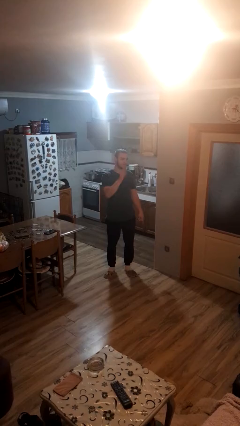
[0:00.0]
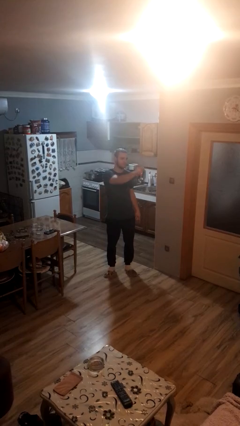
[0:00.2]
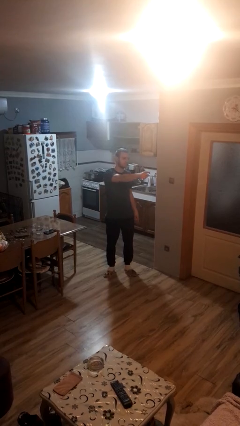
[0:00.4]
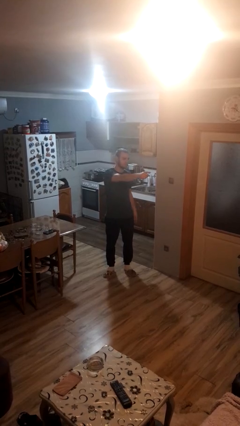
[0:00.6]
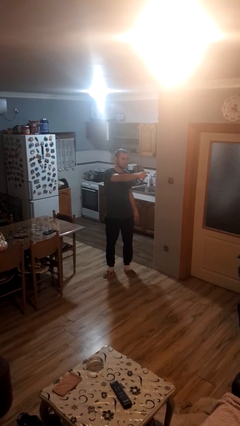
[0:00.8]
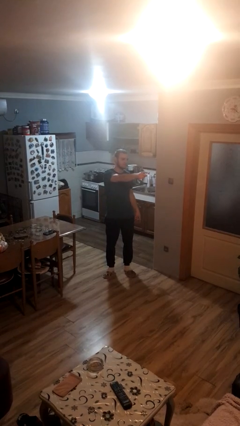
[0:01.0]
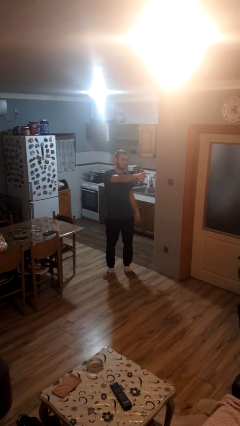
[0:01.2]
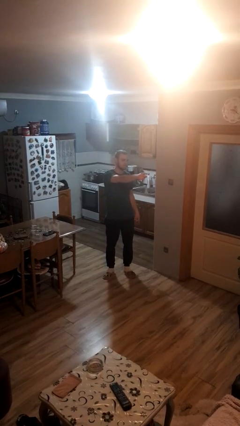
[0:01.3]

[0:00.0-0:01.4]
person points at person

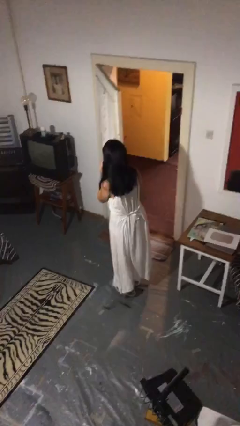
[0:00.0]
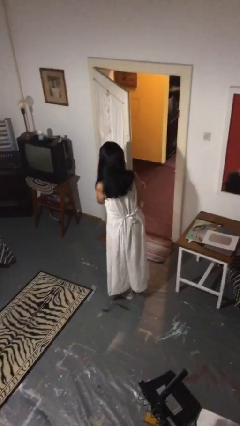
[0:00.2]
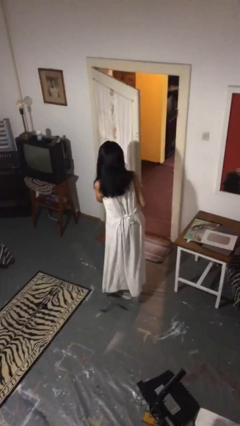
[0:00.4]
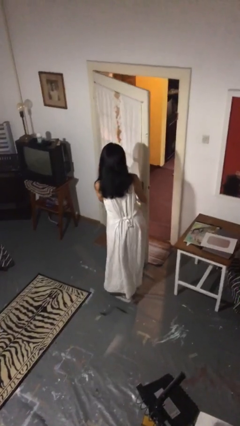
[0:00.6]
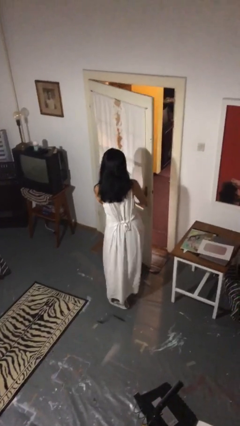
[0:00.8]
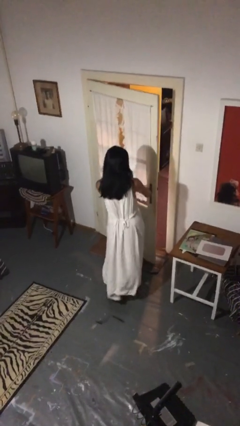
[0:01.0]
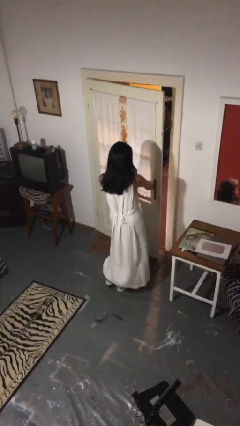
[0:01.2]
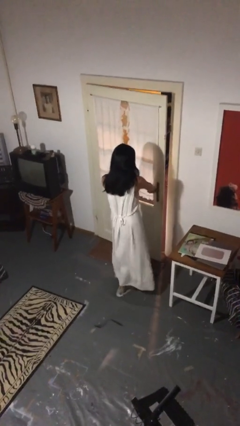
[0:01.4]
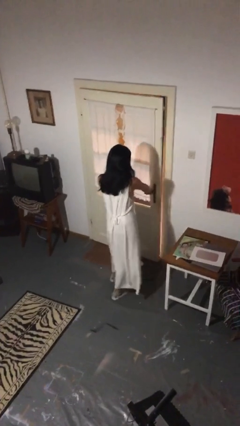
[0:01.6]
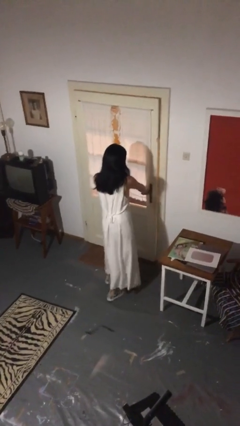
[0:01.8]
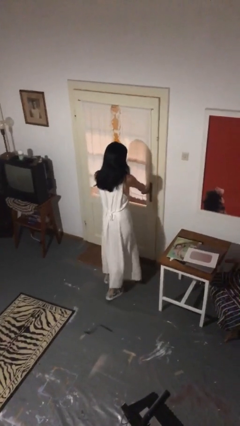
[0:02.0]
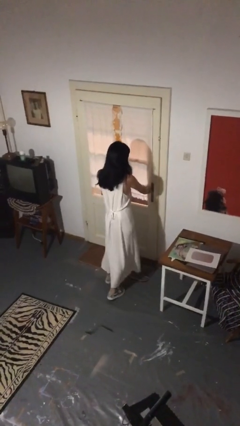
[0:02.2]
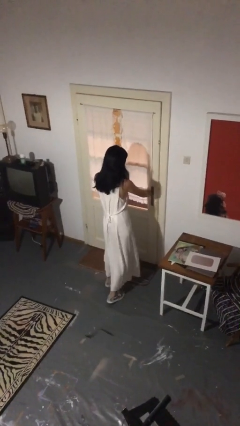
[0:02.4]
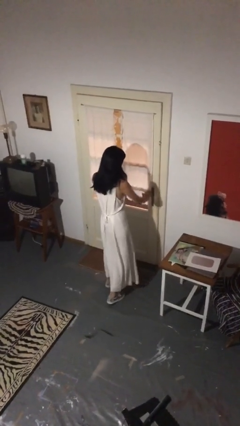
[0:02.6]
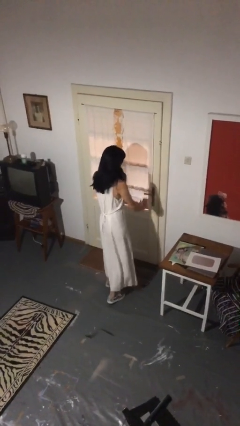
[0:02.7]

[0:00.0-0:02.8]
person closes facility door

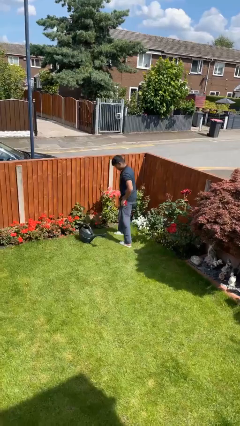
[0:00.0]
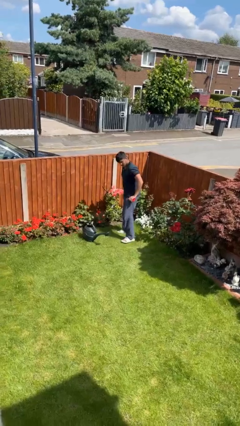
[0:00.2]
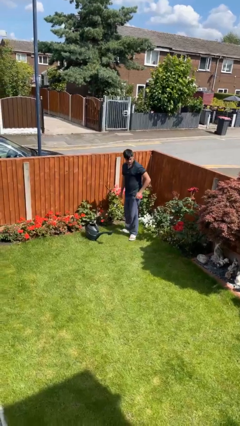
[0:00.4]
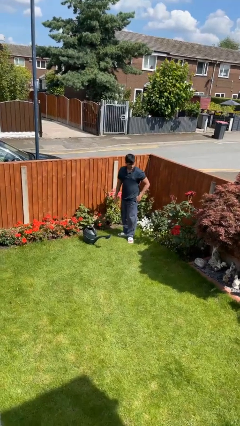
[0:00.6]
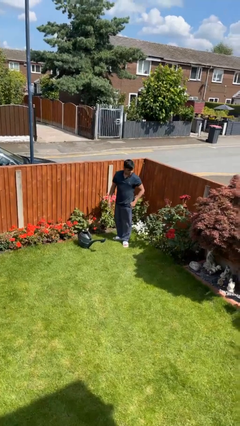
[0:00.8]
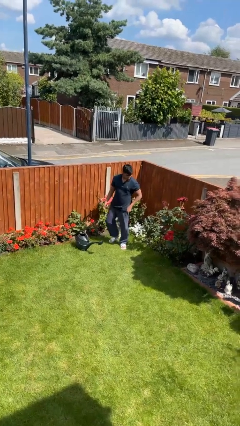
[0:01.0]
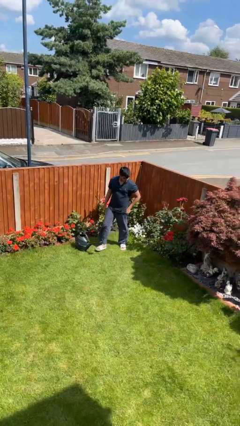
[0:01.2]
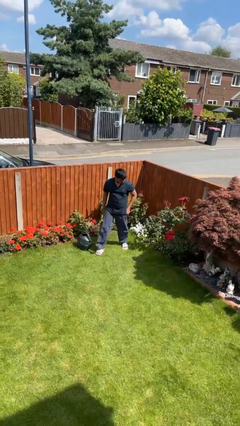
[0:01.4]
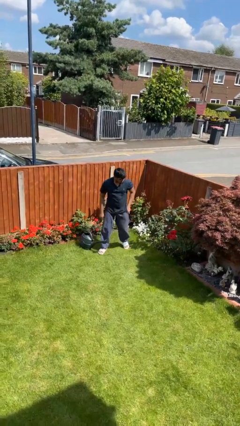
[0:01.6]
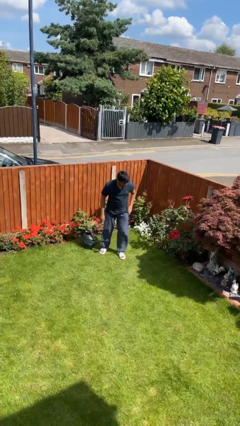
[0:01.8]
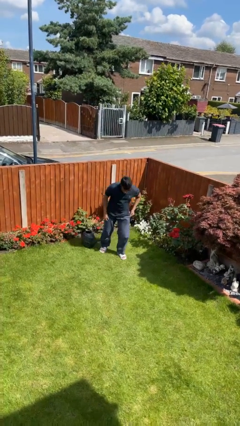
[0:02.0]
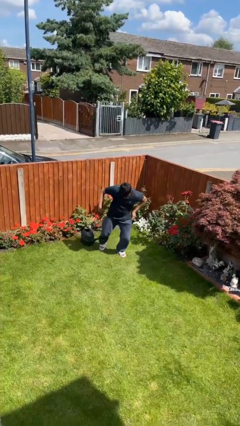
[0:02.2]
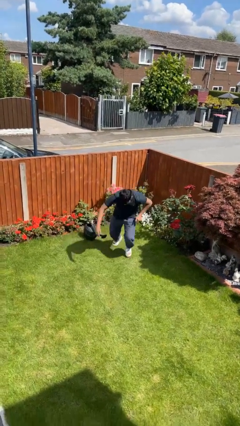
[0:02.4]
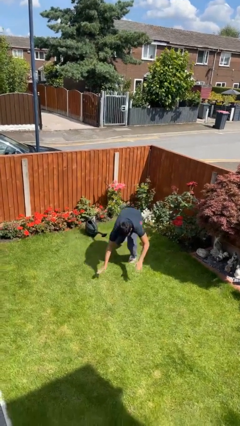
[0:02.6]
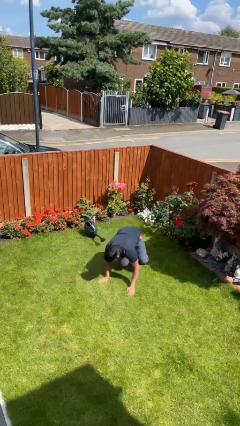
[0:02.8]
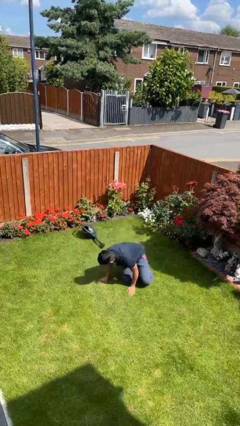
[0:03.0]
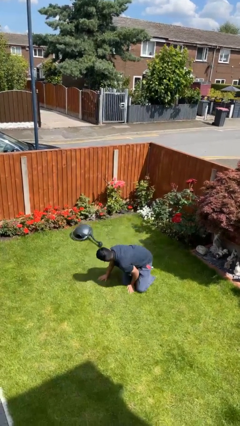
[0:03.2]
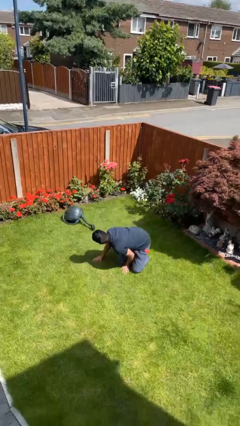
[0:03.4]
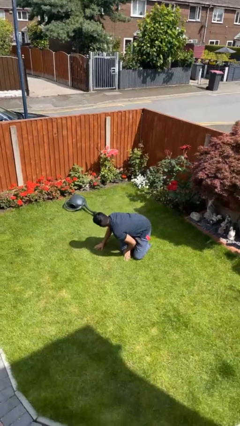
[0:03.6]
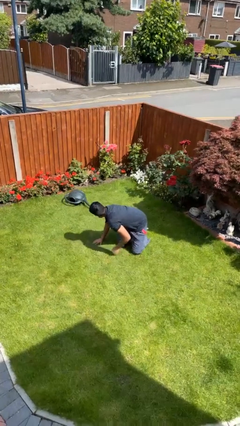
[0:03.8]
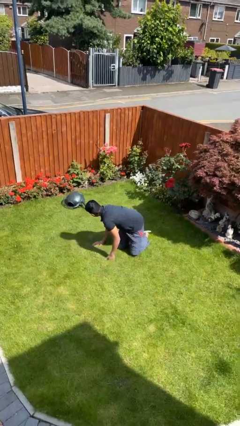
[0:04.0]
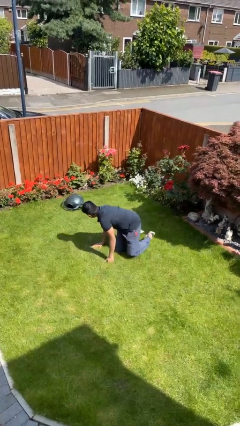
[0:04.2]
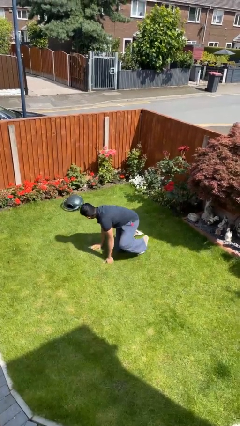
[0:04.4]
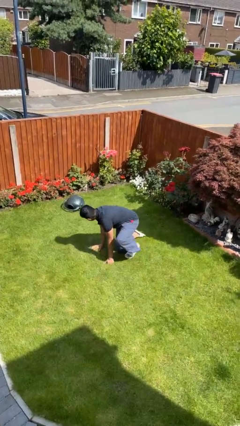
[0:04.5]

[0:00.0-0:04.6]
person trips on object on floor

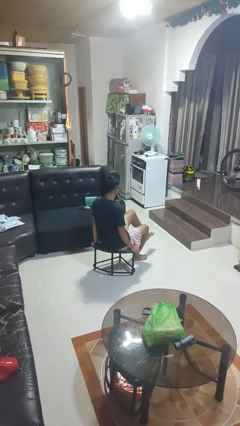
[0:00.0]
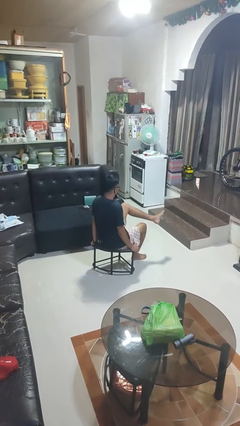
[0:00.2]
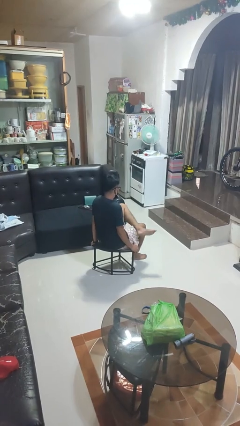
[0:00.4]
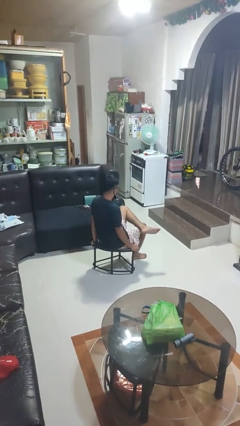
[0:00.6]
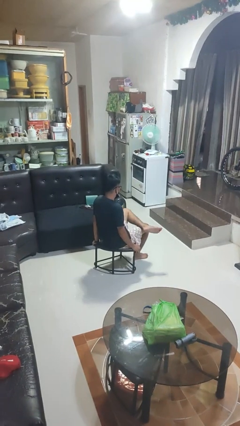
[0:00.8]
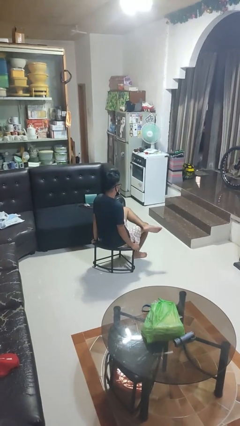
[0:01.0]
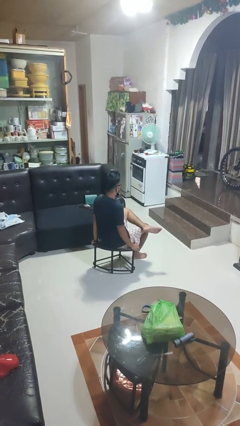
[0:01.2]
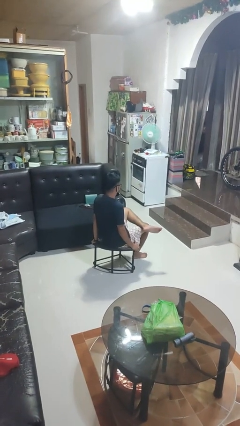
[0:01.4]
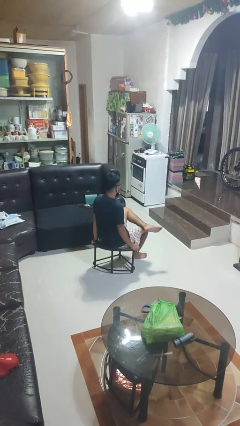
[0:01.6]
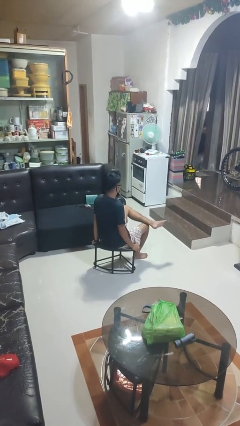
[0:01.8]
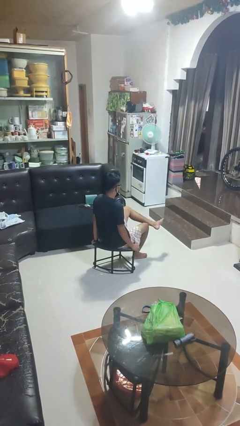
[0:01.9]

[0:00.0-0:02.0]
person crosses legs

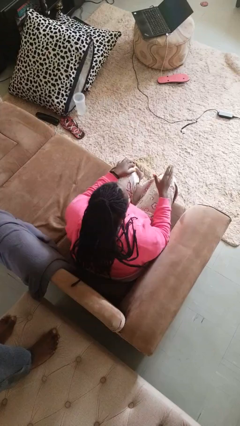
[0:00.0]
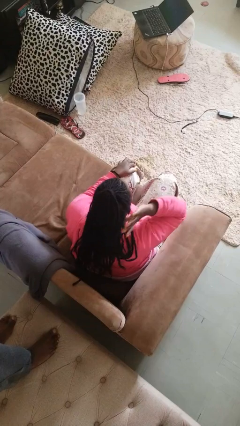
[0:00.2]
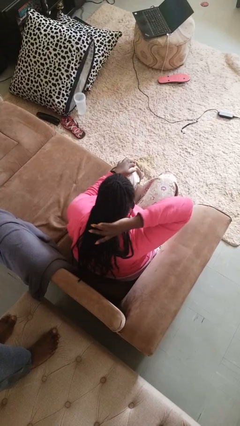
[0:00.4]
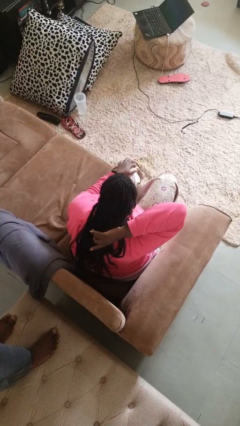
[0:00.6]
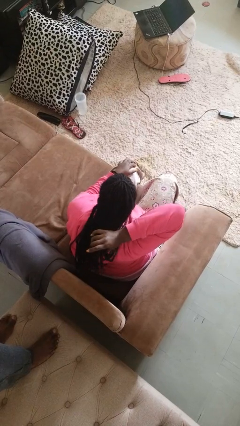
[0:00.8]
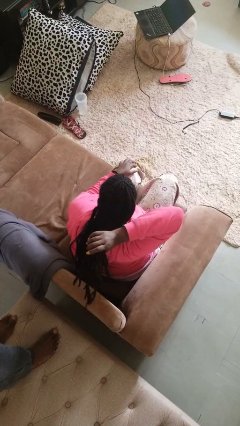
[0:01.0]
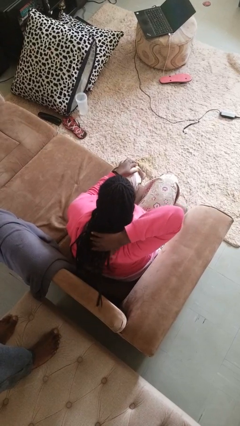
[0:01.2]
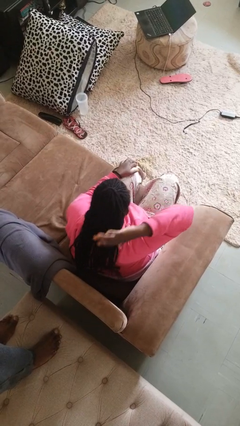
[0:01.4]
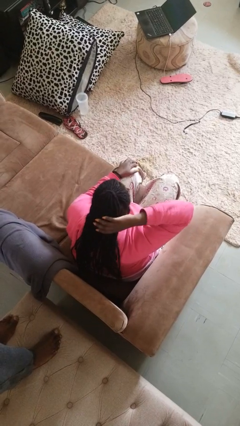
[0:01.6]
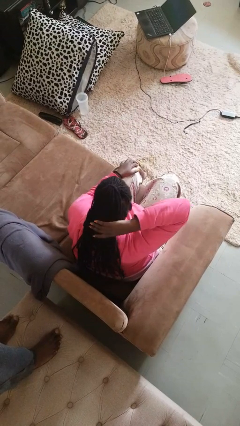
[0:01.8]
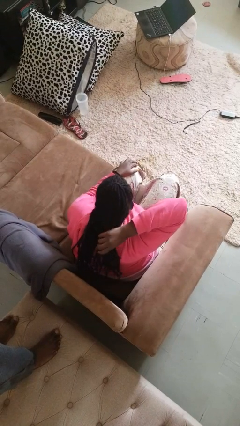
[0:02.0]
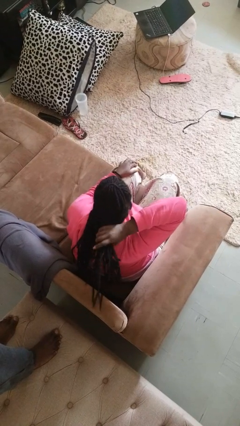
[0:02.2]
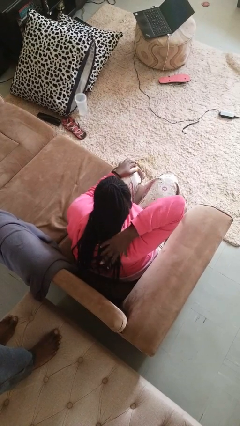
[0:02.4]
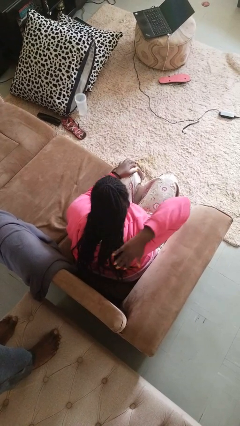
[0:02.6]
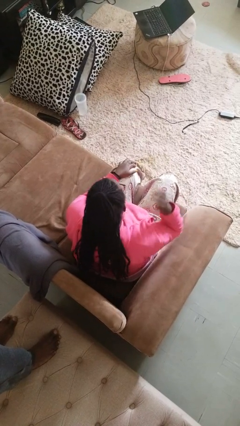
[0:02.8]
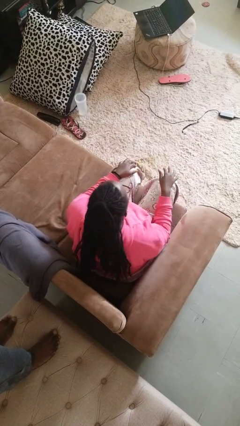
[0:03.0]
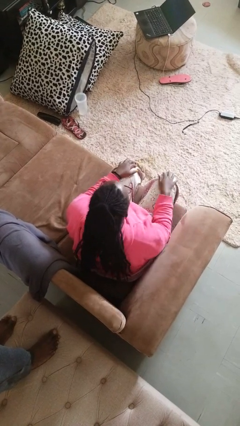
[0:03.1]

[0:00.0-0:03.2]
person strokes hair

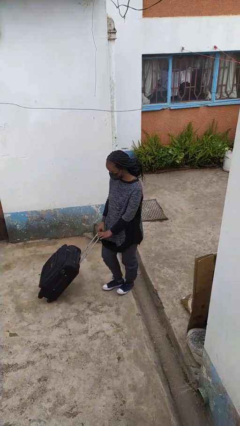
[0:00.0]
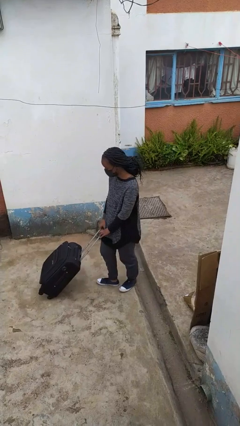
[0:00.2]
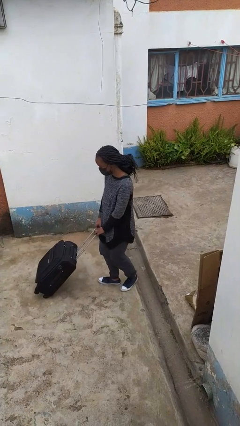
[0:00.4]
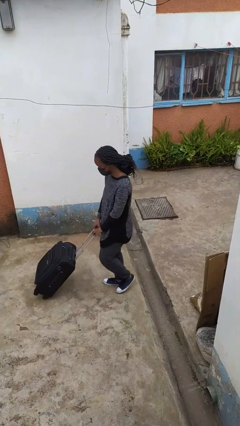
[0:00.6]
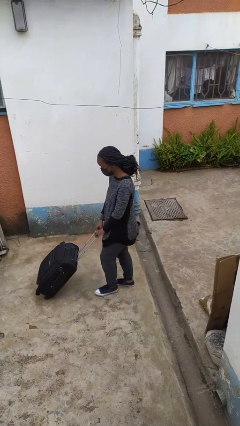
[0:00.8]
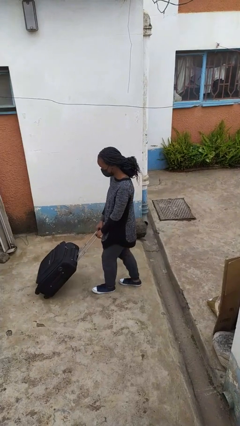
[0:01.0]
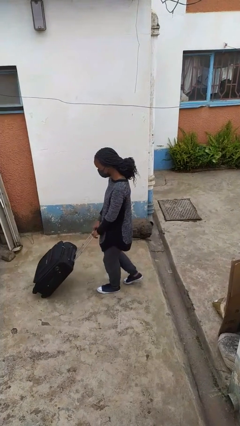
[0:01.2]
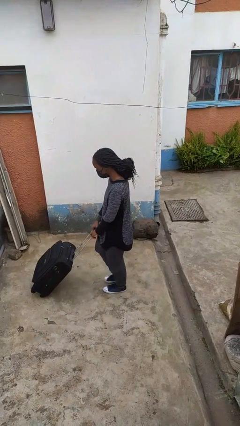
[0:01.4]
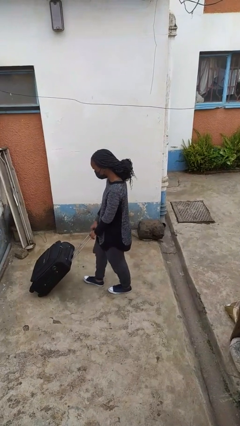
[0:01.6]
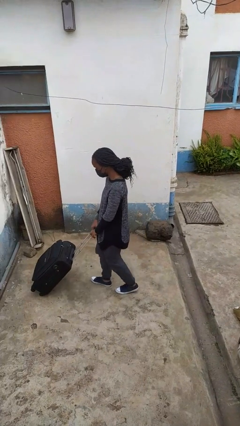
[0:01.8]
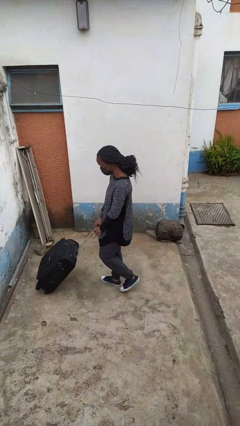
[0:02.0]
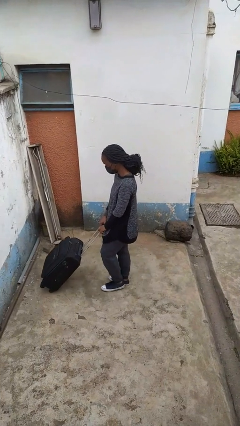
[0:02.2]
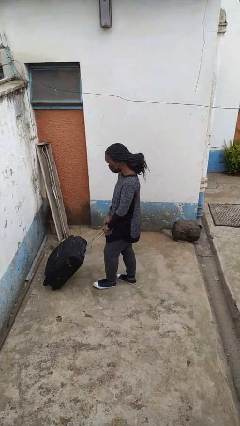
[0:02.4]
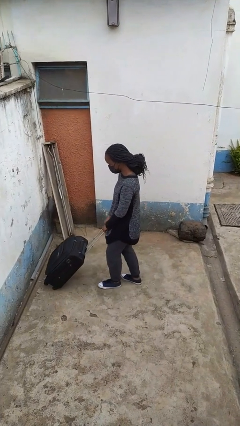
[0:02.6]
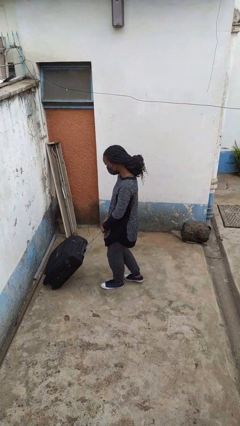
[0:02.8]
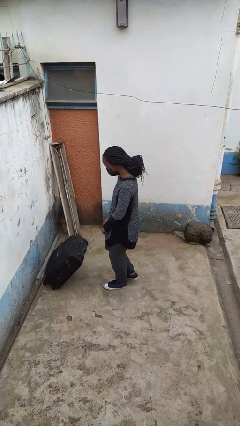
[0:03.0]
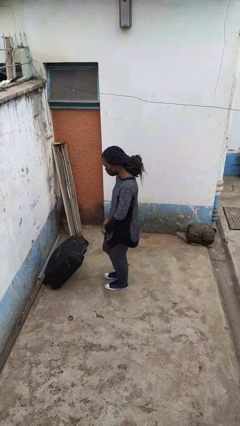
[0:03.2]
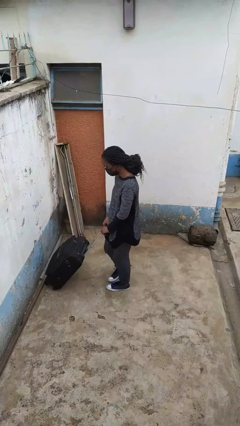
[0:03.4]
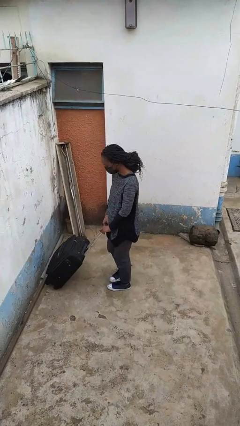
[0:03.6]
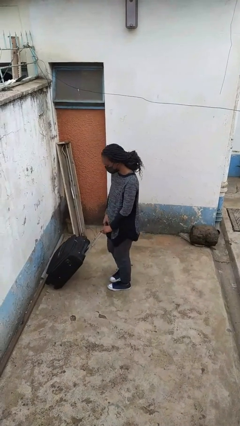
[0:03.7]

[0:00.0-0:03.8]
person pushes wheeled cart
